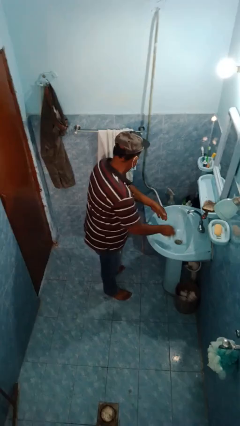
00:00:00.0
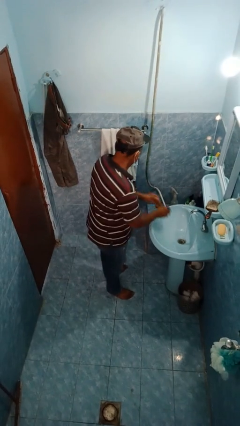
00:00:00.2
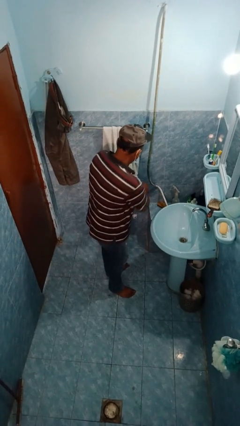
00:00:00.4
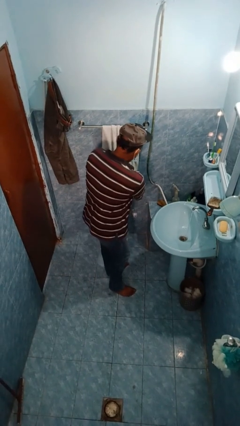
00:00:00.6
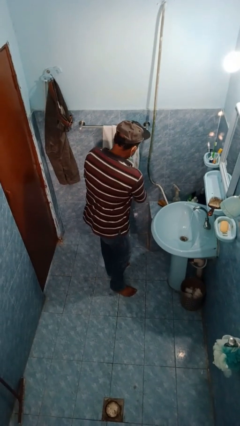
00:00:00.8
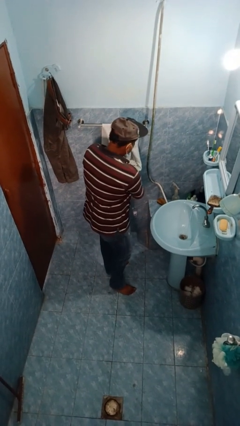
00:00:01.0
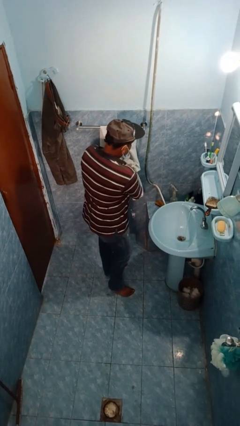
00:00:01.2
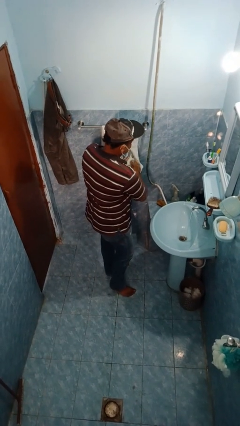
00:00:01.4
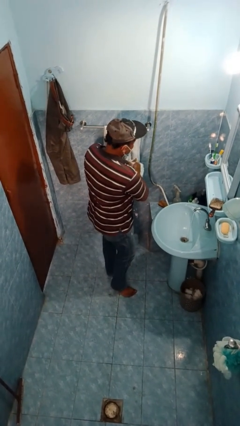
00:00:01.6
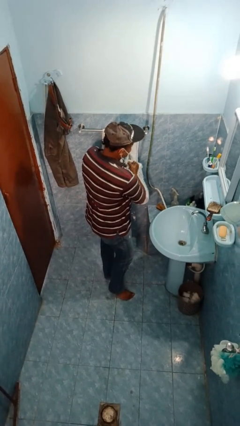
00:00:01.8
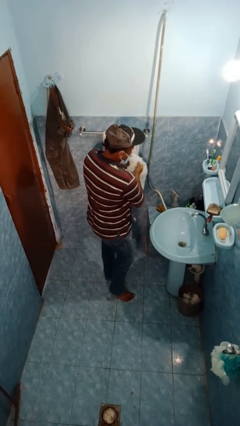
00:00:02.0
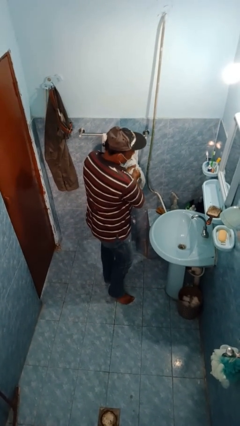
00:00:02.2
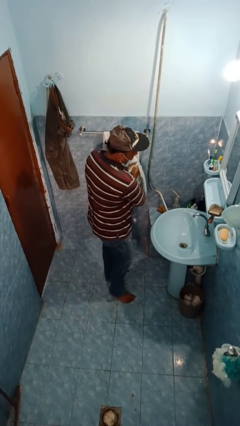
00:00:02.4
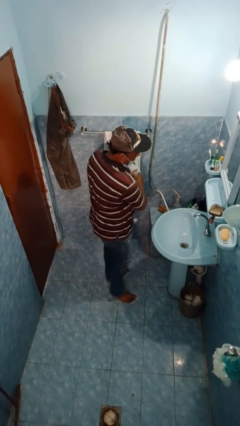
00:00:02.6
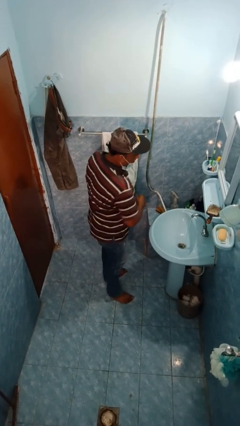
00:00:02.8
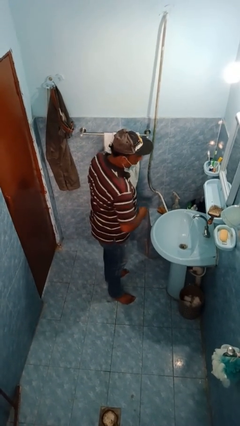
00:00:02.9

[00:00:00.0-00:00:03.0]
person dries hands with towel

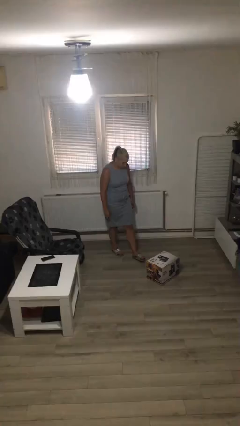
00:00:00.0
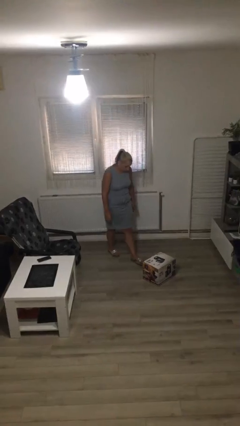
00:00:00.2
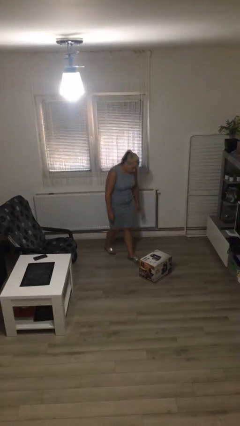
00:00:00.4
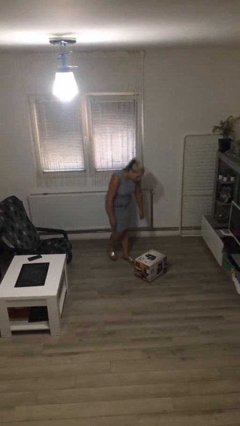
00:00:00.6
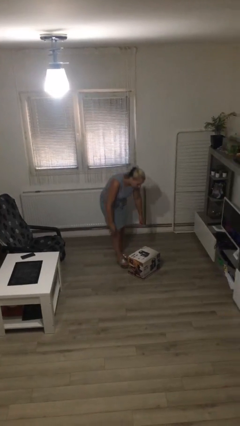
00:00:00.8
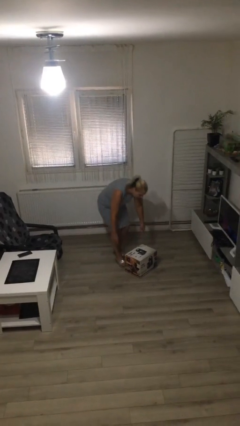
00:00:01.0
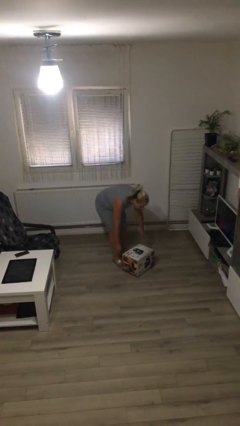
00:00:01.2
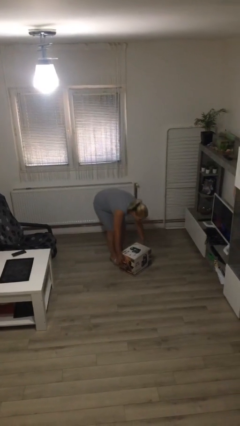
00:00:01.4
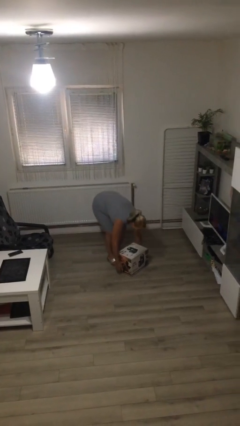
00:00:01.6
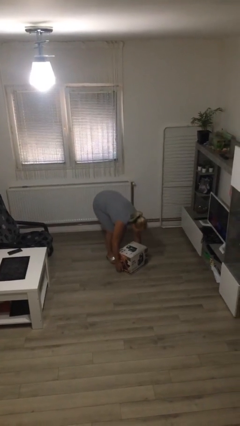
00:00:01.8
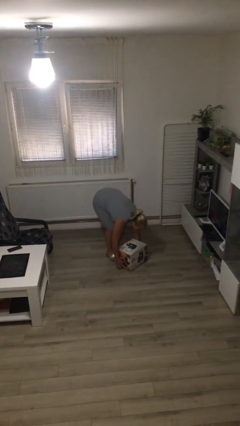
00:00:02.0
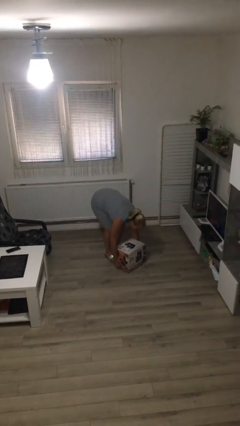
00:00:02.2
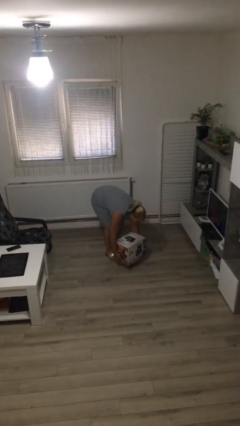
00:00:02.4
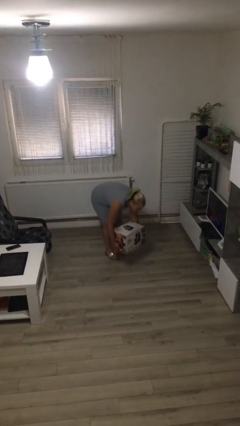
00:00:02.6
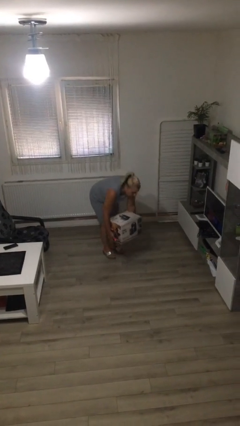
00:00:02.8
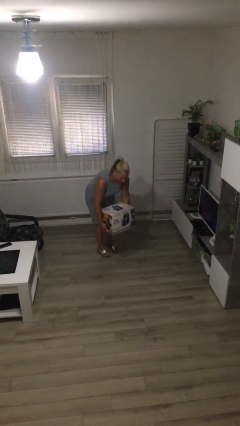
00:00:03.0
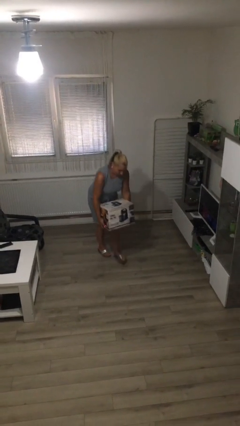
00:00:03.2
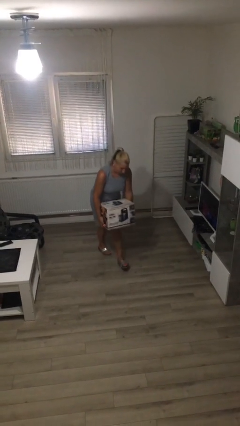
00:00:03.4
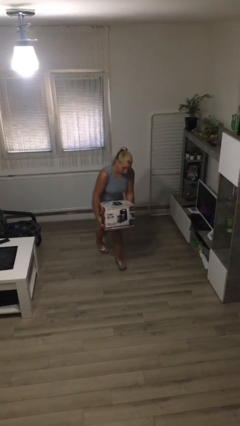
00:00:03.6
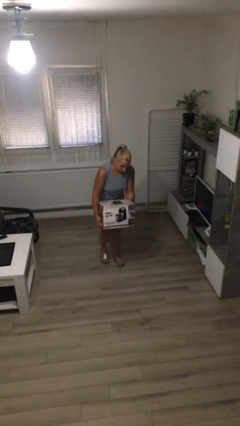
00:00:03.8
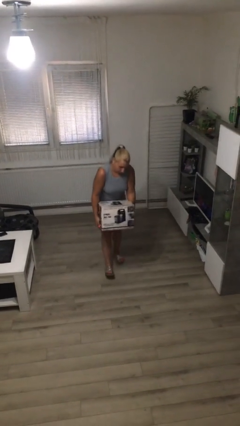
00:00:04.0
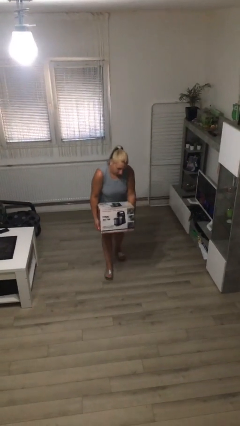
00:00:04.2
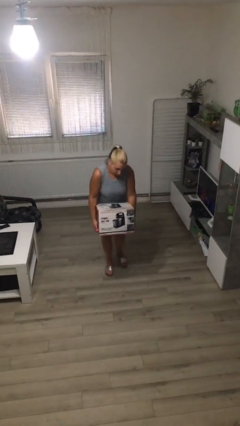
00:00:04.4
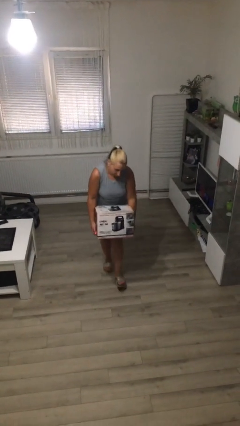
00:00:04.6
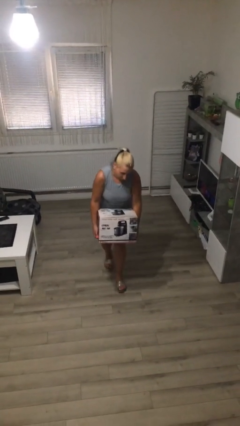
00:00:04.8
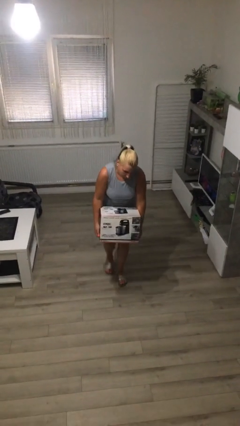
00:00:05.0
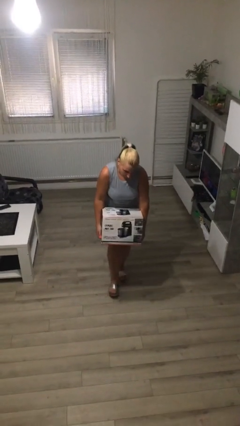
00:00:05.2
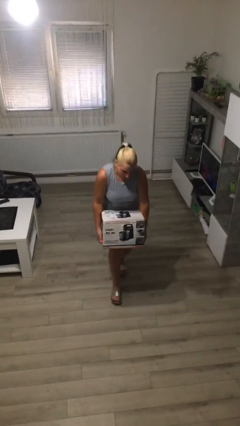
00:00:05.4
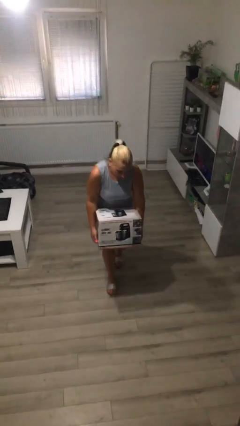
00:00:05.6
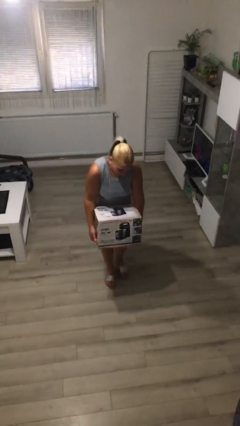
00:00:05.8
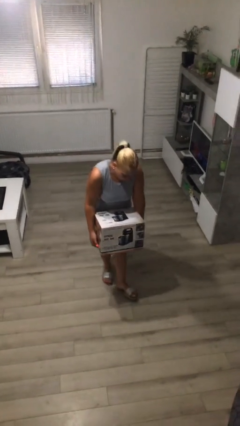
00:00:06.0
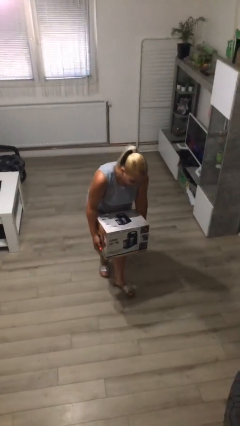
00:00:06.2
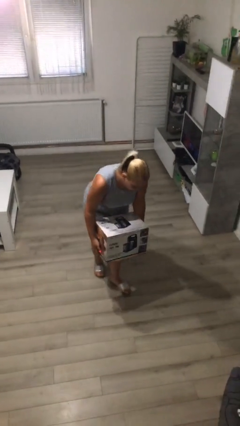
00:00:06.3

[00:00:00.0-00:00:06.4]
person carries heavy object

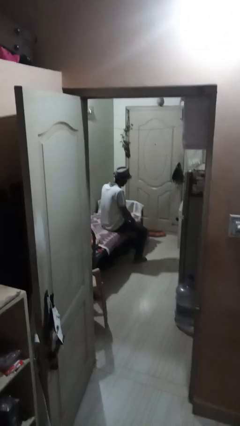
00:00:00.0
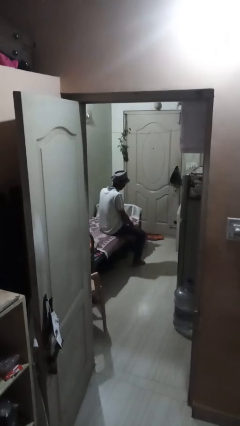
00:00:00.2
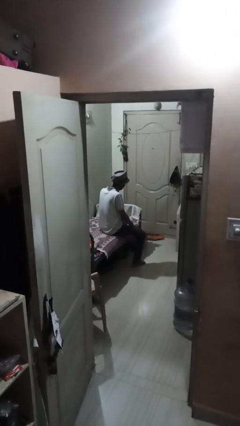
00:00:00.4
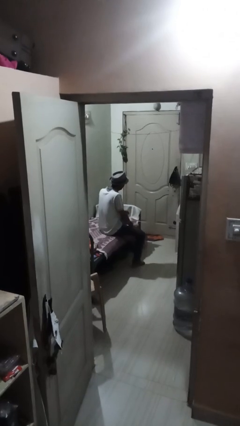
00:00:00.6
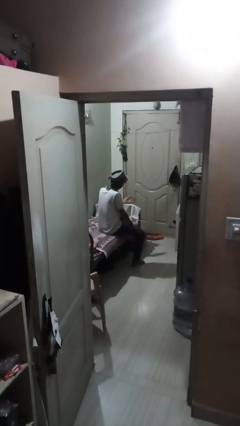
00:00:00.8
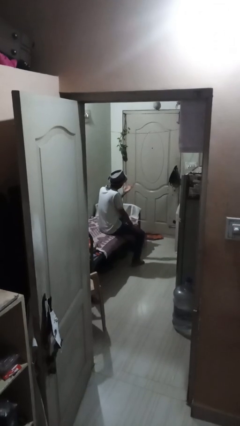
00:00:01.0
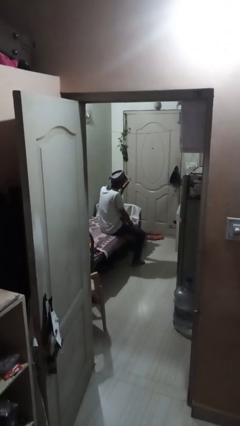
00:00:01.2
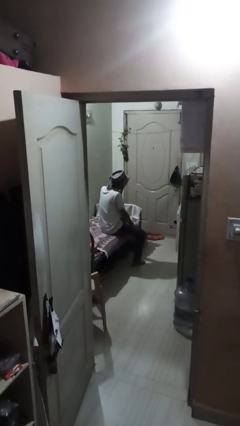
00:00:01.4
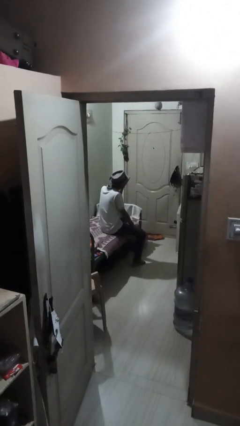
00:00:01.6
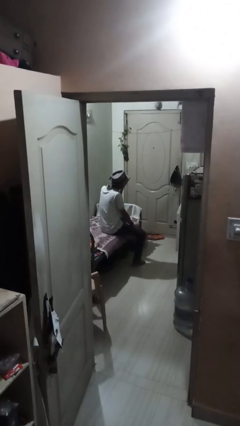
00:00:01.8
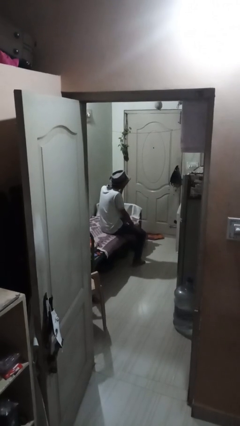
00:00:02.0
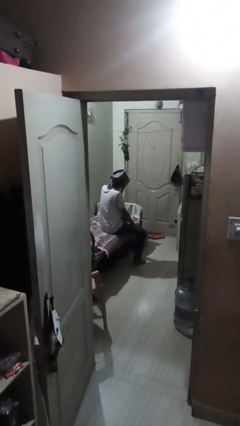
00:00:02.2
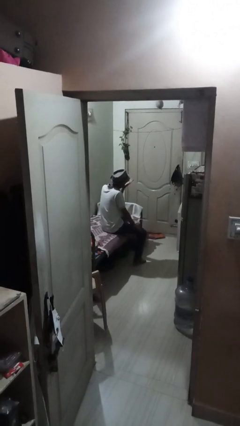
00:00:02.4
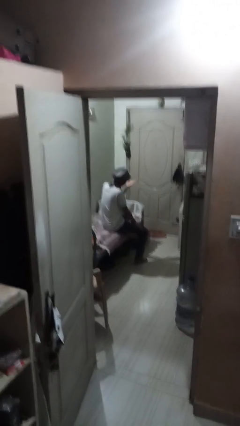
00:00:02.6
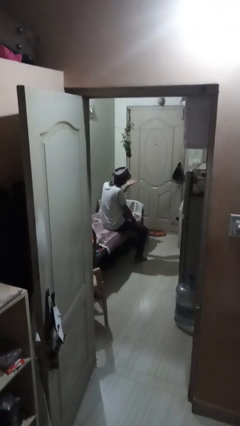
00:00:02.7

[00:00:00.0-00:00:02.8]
person gestures blow kiss

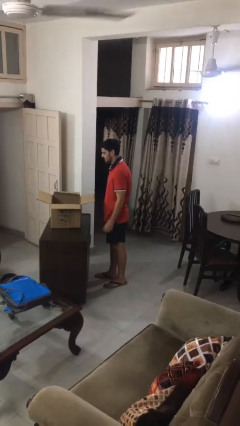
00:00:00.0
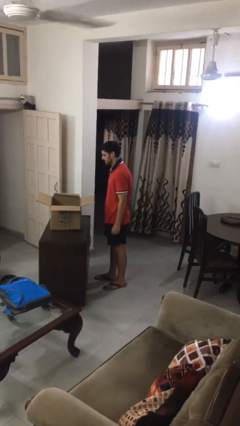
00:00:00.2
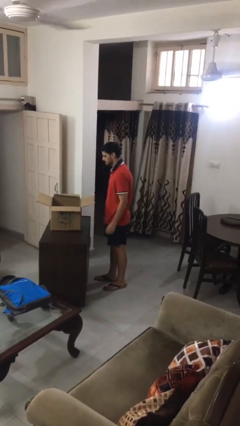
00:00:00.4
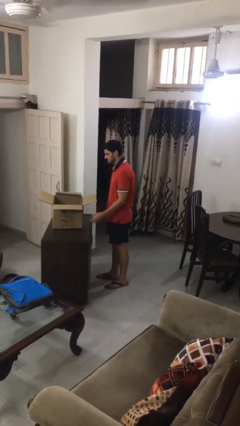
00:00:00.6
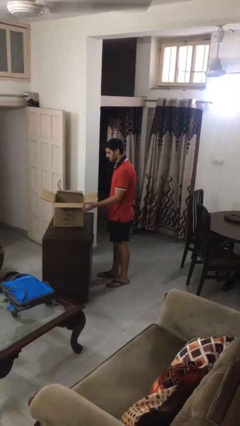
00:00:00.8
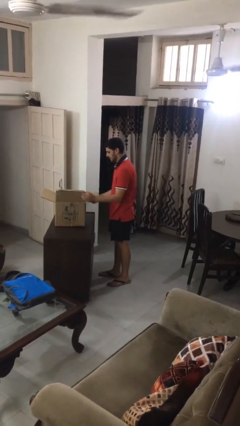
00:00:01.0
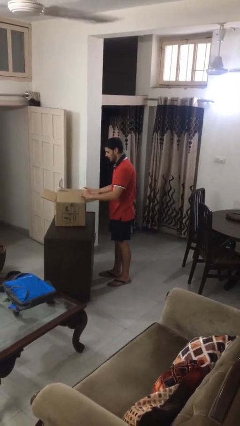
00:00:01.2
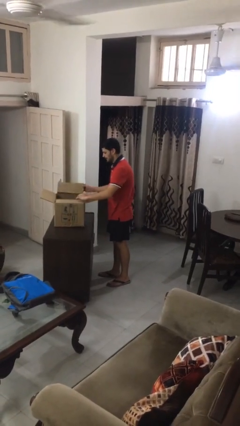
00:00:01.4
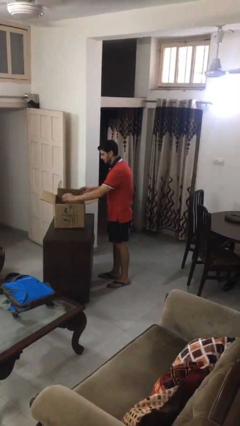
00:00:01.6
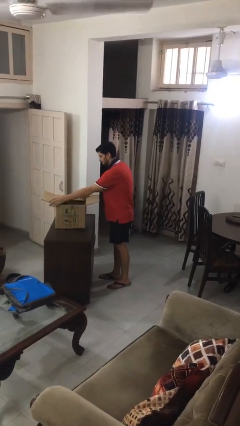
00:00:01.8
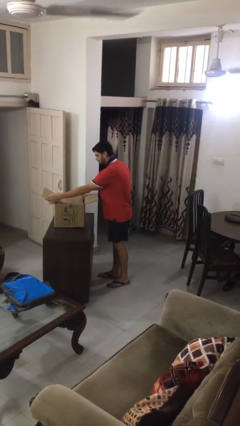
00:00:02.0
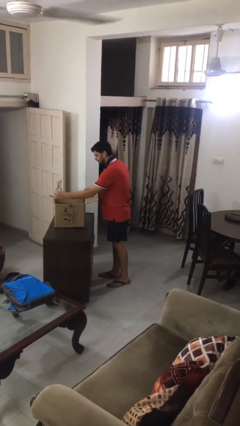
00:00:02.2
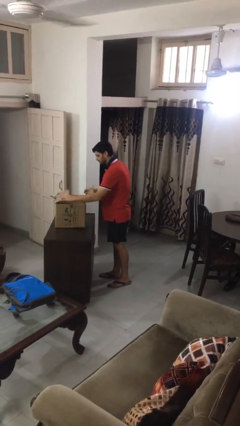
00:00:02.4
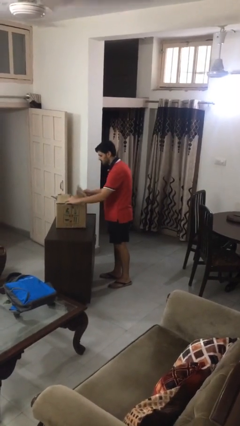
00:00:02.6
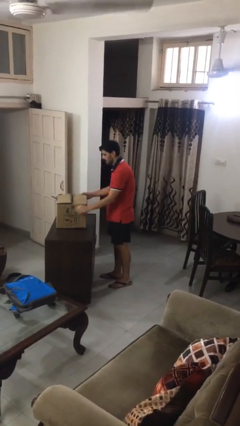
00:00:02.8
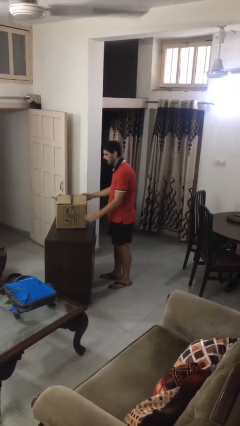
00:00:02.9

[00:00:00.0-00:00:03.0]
person closes box

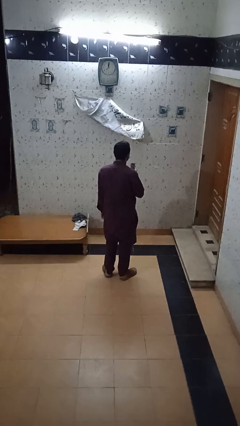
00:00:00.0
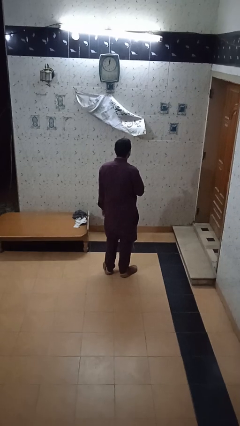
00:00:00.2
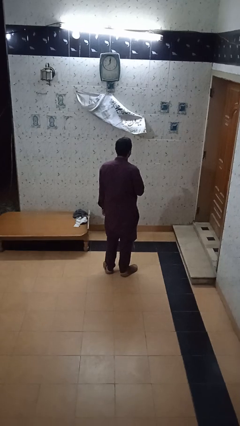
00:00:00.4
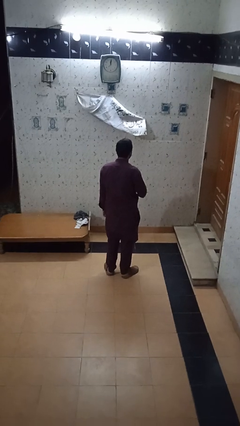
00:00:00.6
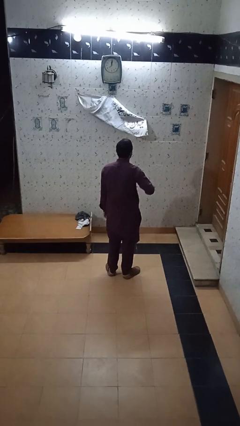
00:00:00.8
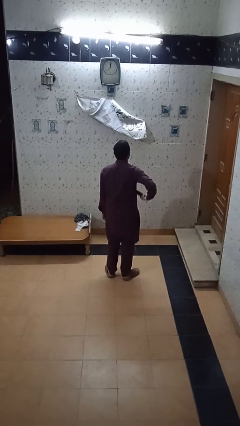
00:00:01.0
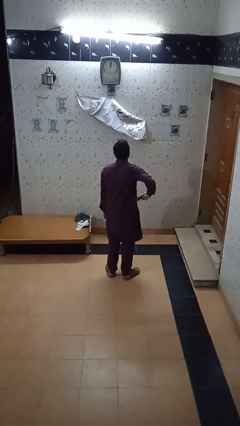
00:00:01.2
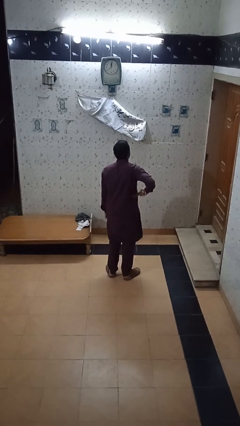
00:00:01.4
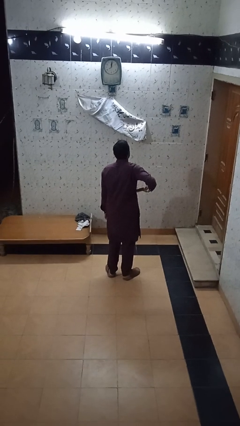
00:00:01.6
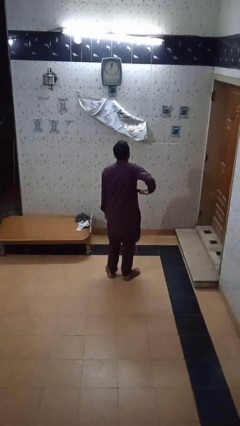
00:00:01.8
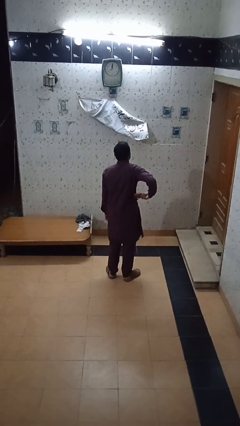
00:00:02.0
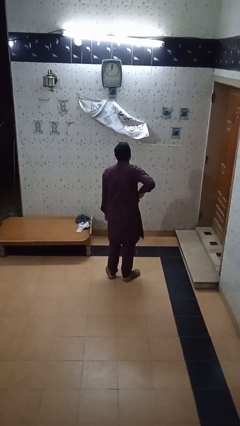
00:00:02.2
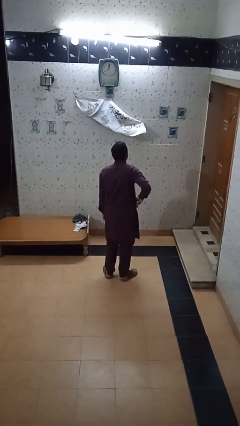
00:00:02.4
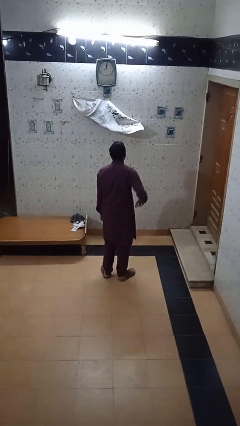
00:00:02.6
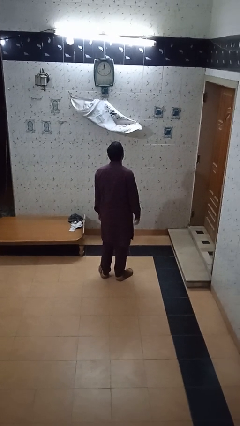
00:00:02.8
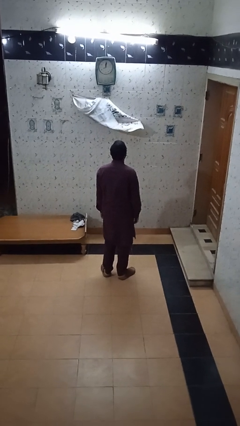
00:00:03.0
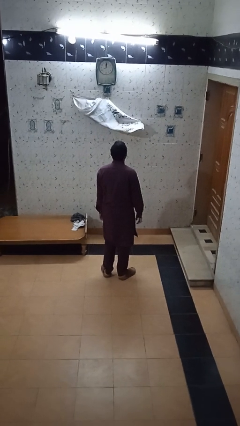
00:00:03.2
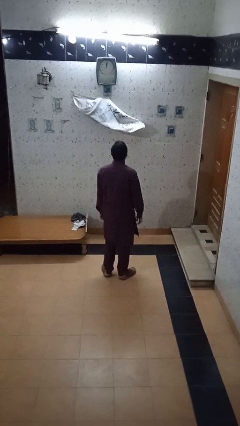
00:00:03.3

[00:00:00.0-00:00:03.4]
person puts phone into pocket
